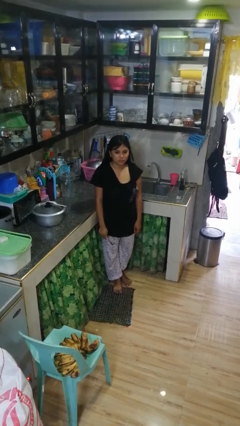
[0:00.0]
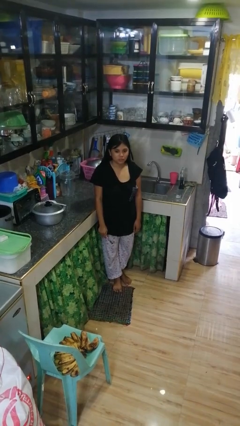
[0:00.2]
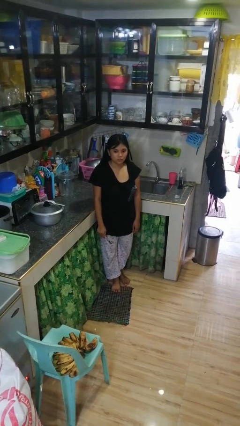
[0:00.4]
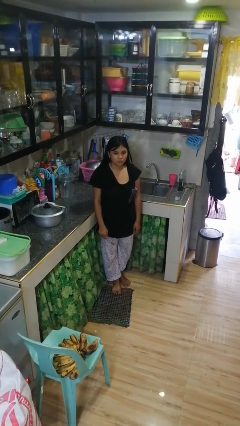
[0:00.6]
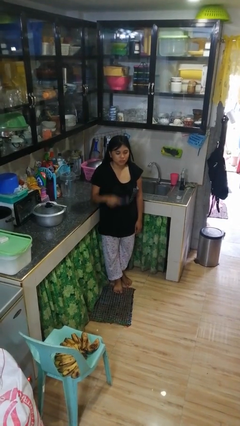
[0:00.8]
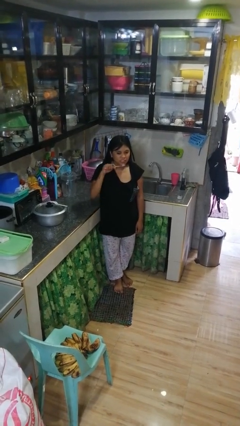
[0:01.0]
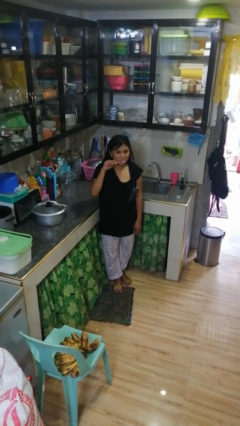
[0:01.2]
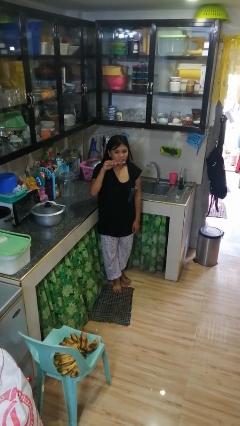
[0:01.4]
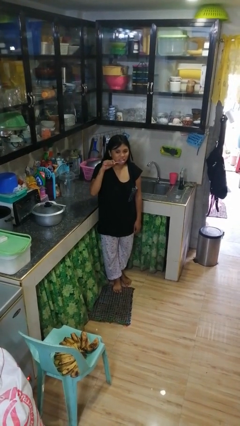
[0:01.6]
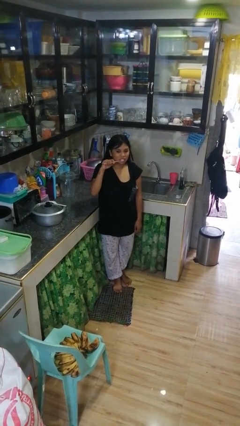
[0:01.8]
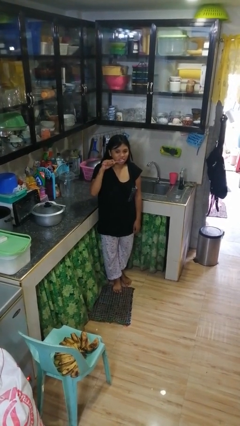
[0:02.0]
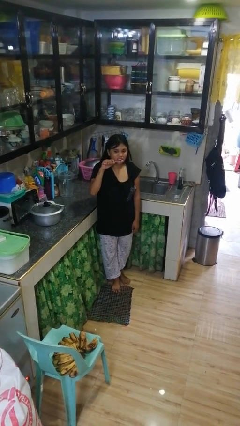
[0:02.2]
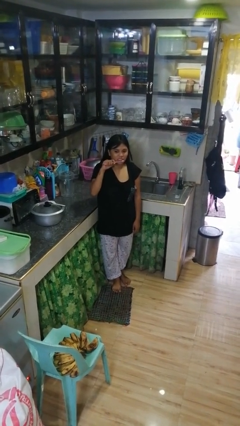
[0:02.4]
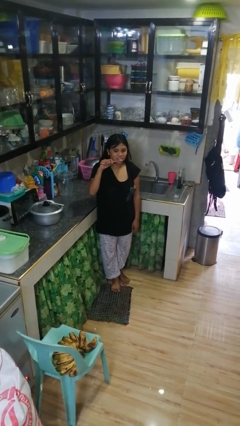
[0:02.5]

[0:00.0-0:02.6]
person brushes teeth

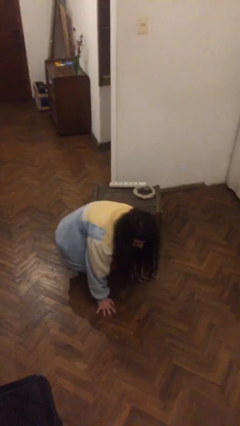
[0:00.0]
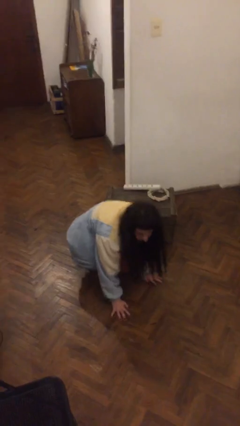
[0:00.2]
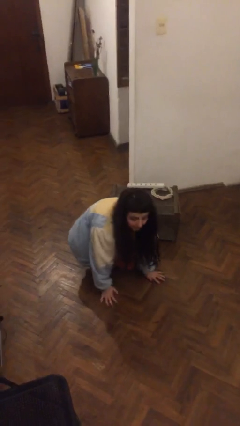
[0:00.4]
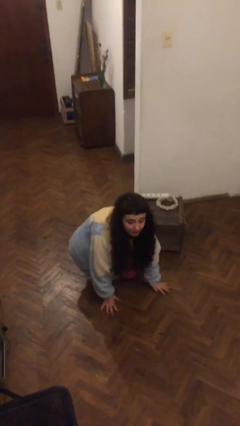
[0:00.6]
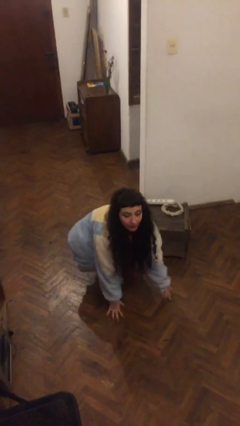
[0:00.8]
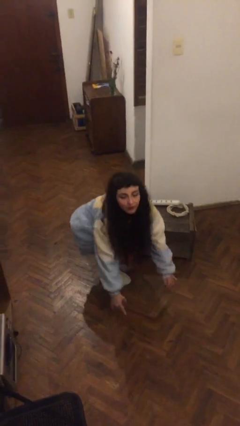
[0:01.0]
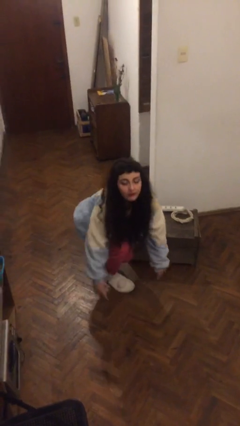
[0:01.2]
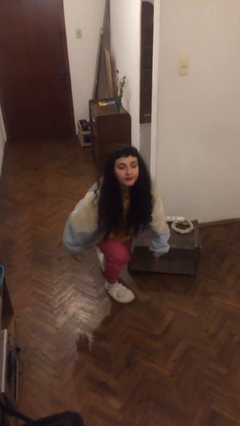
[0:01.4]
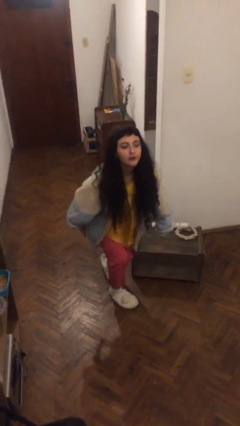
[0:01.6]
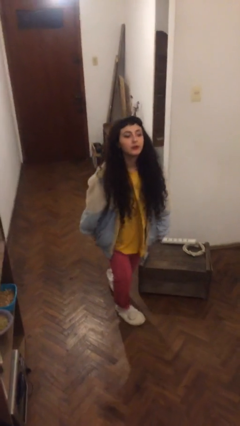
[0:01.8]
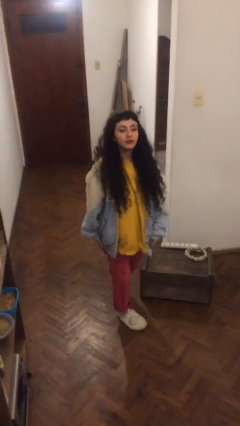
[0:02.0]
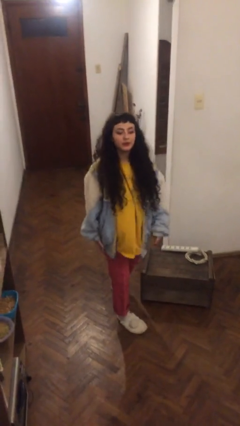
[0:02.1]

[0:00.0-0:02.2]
person stands up from floor

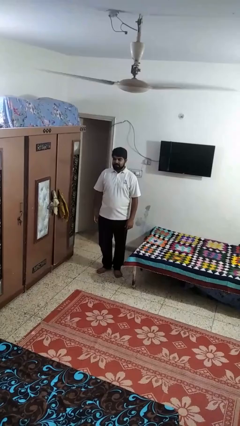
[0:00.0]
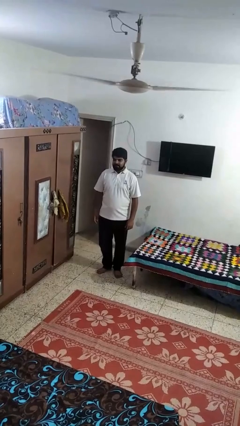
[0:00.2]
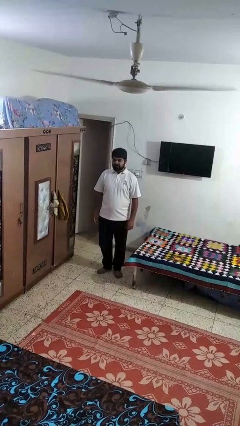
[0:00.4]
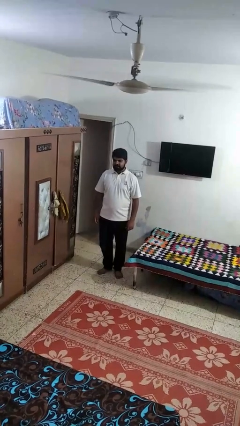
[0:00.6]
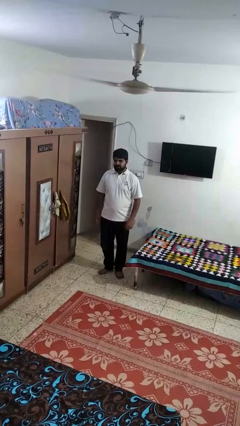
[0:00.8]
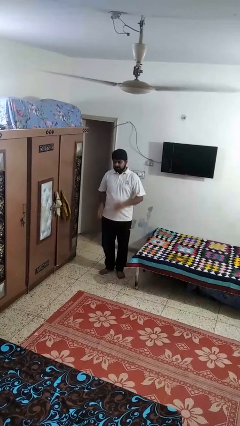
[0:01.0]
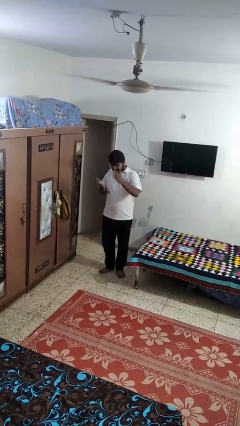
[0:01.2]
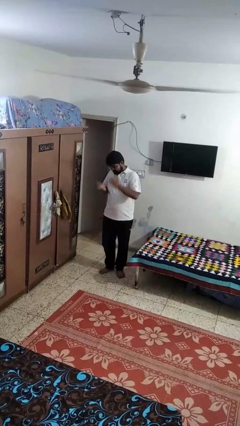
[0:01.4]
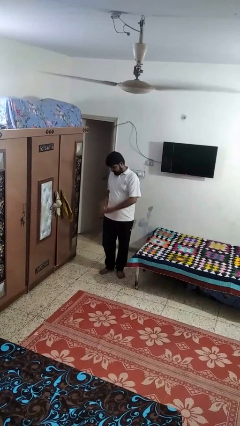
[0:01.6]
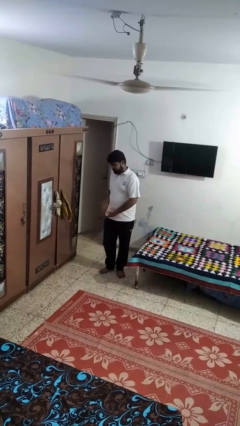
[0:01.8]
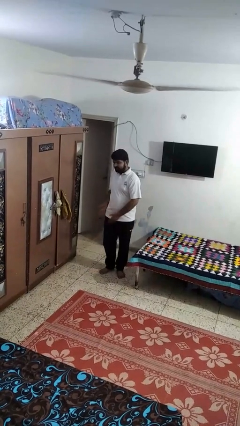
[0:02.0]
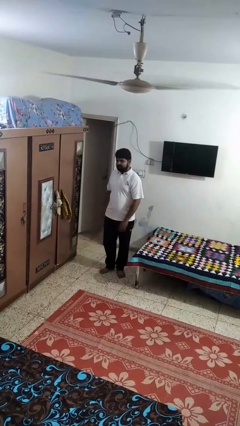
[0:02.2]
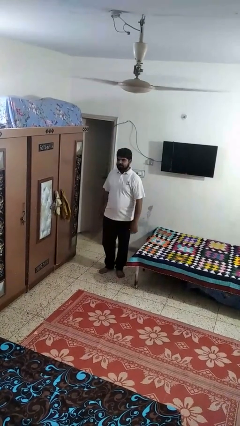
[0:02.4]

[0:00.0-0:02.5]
person gestures come here

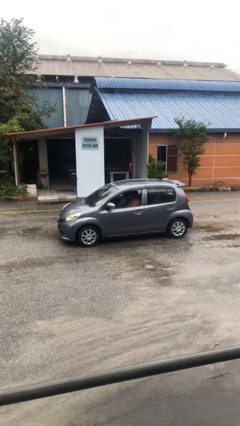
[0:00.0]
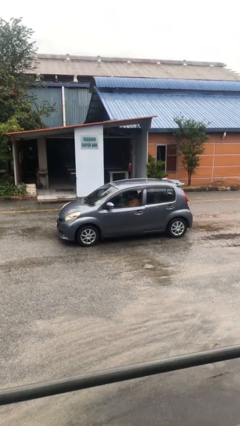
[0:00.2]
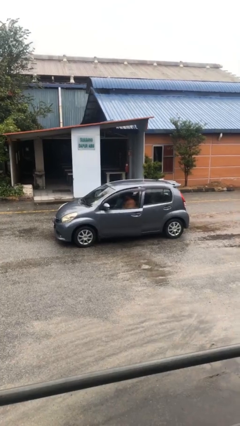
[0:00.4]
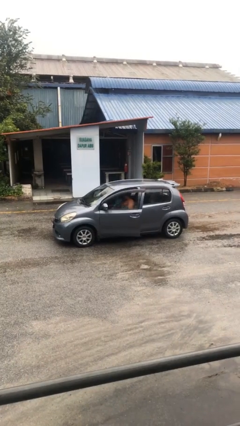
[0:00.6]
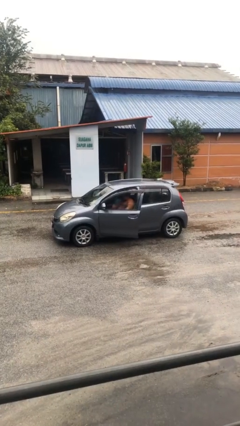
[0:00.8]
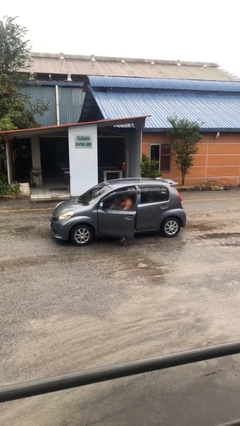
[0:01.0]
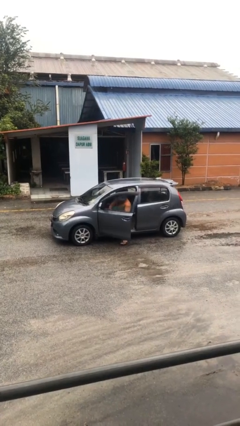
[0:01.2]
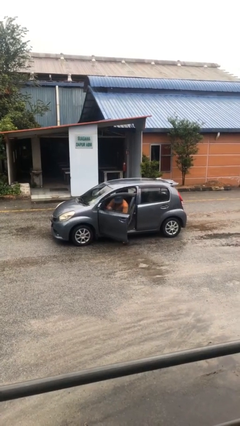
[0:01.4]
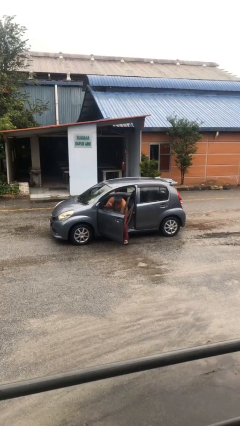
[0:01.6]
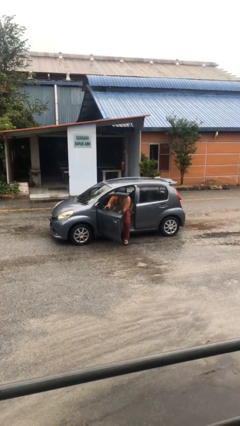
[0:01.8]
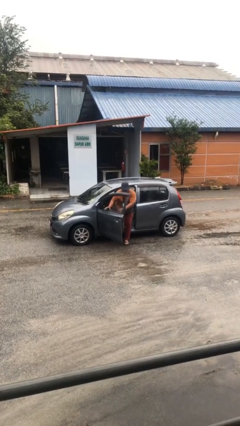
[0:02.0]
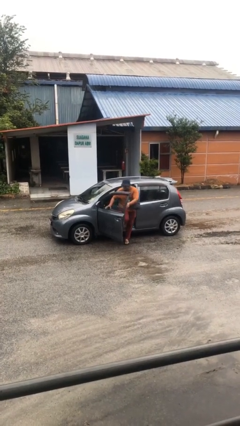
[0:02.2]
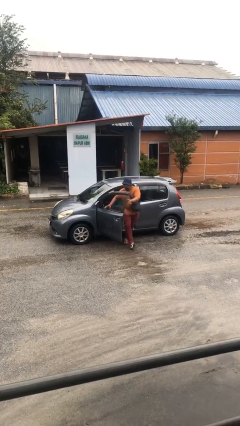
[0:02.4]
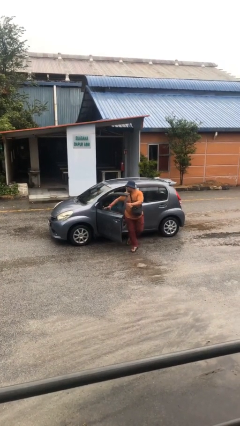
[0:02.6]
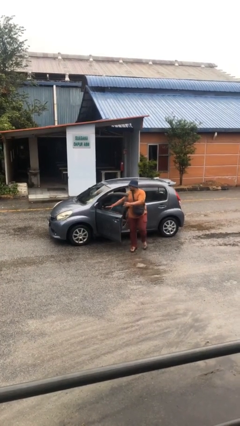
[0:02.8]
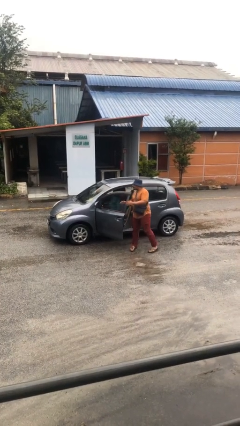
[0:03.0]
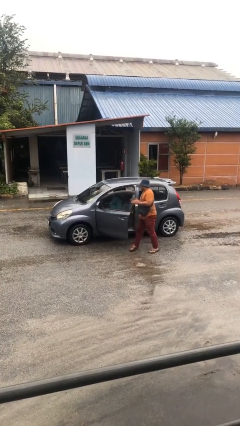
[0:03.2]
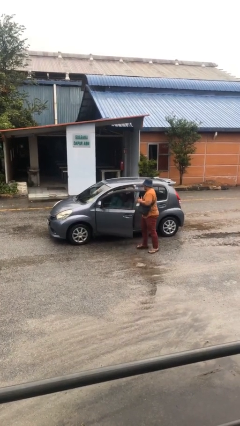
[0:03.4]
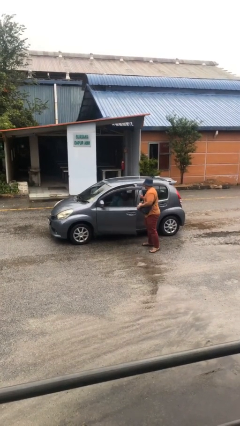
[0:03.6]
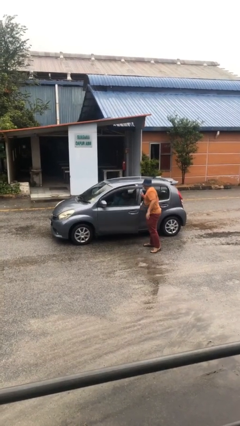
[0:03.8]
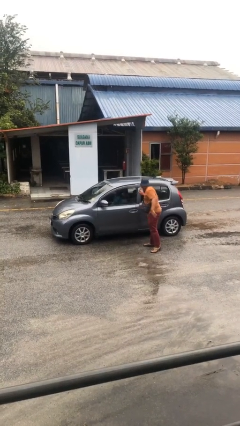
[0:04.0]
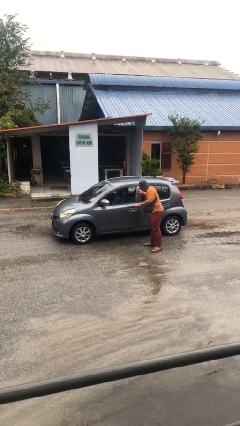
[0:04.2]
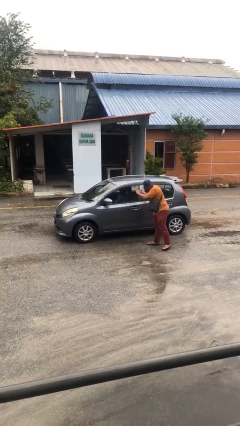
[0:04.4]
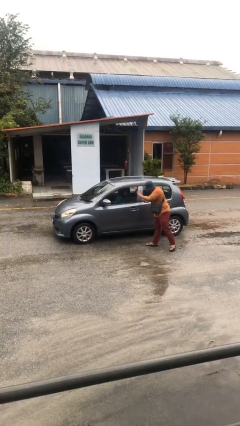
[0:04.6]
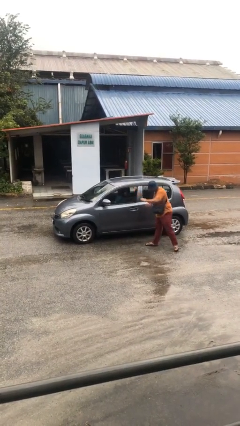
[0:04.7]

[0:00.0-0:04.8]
car drops off person

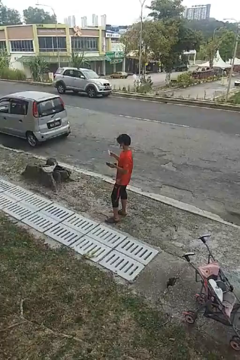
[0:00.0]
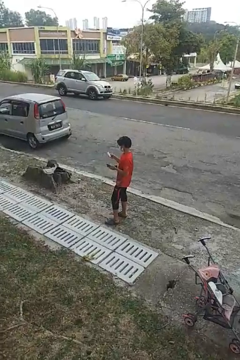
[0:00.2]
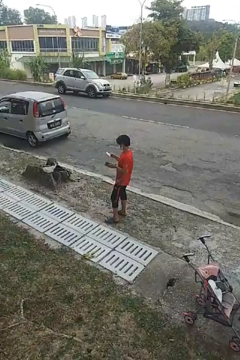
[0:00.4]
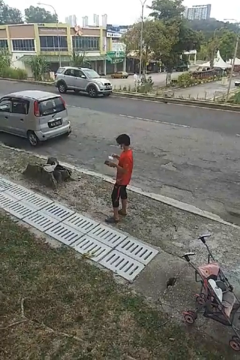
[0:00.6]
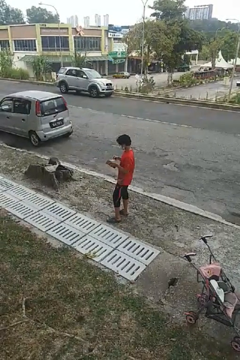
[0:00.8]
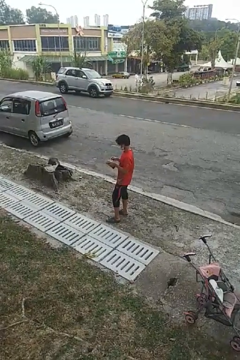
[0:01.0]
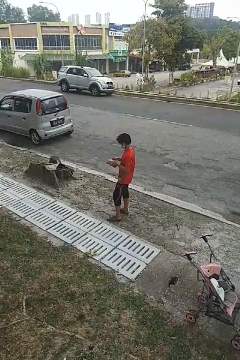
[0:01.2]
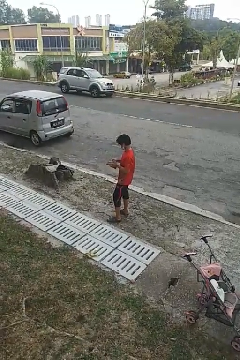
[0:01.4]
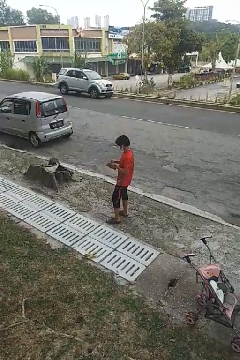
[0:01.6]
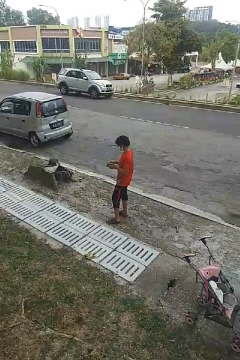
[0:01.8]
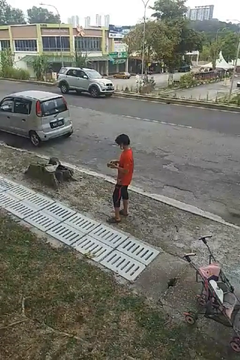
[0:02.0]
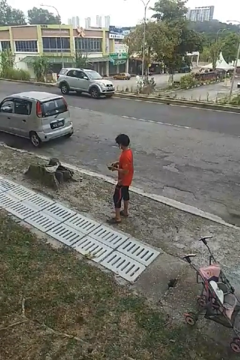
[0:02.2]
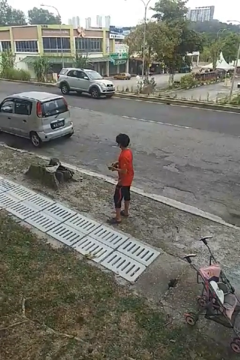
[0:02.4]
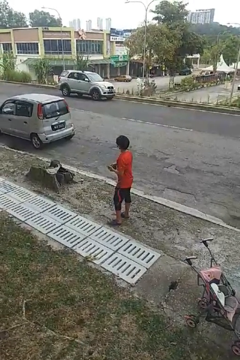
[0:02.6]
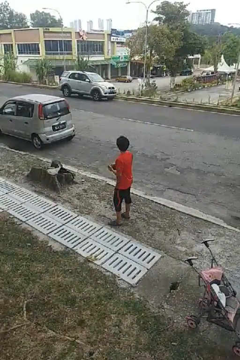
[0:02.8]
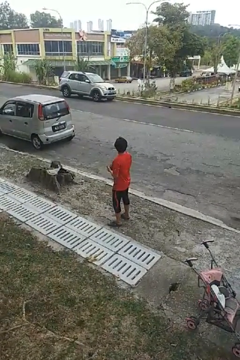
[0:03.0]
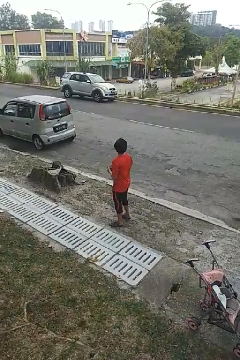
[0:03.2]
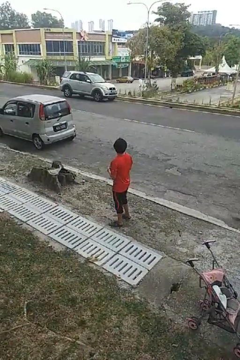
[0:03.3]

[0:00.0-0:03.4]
person puts object into purse

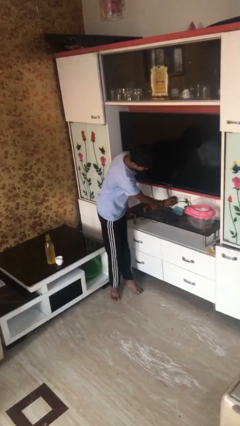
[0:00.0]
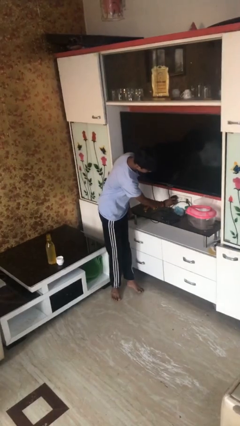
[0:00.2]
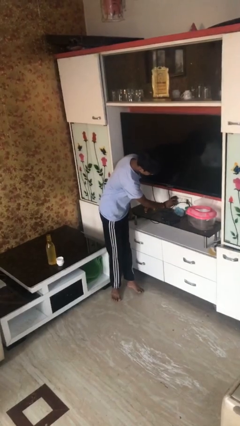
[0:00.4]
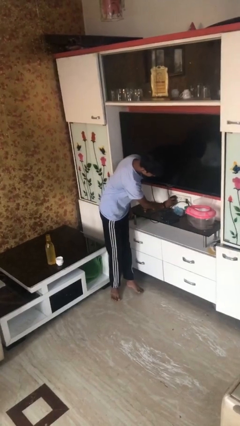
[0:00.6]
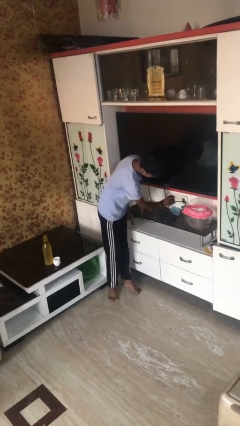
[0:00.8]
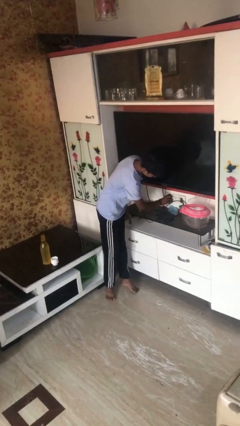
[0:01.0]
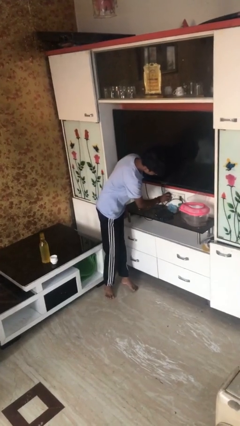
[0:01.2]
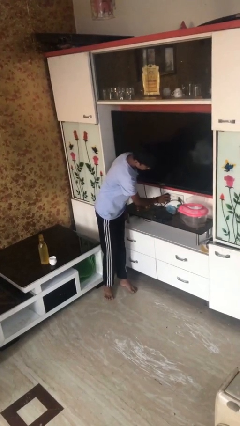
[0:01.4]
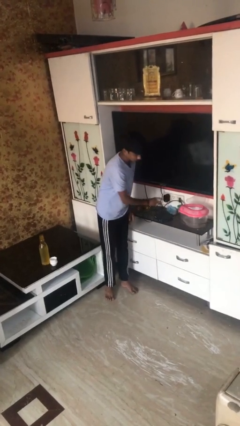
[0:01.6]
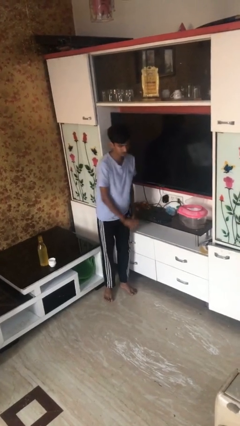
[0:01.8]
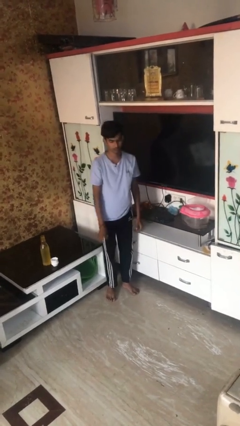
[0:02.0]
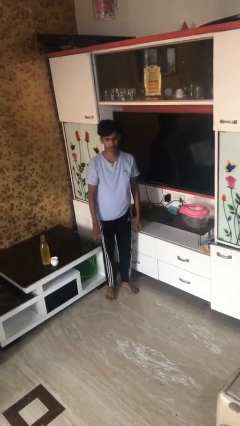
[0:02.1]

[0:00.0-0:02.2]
person plugs into electrical socket
